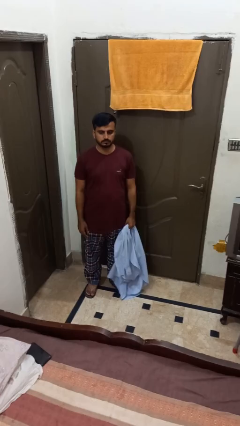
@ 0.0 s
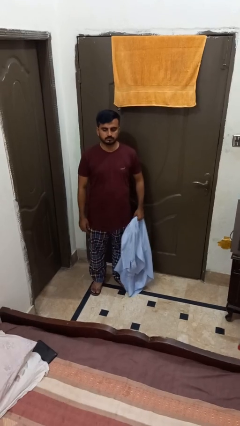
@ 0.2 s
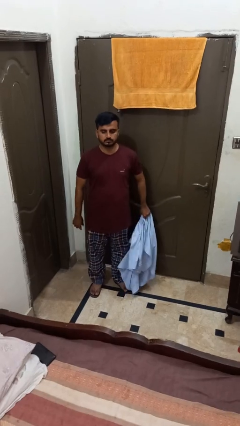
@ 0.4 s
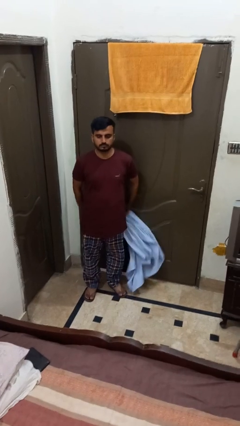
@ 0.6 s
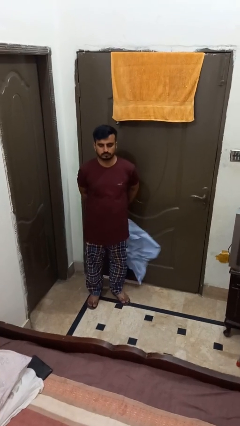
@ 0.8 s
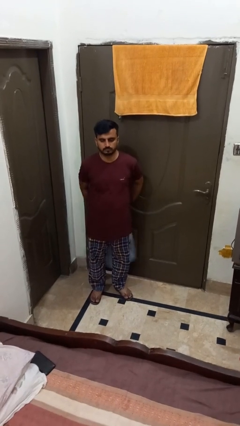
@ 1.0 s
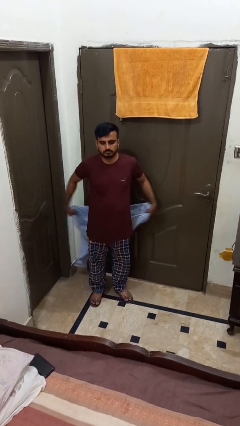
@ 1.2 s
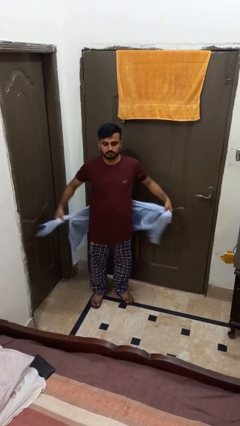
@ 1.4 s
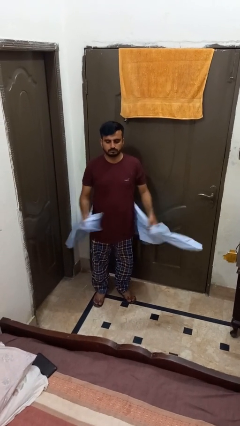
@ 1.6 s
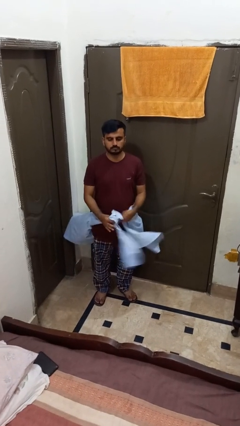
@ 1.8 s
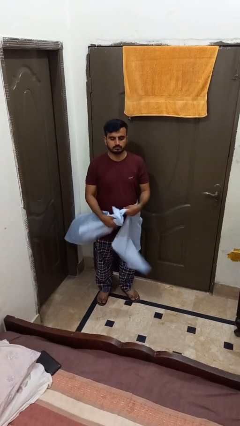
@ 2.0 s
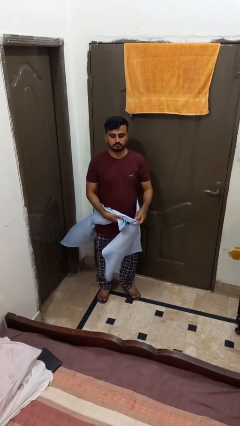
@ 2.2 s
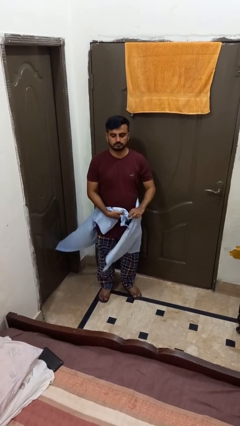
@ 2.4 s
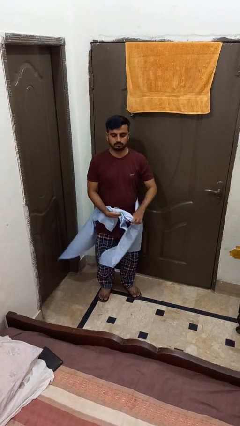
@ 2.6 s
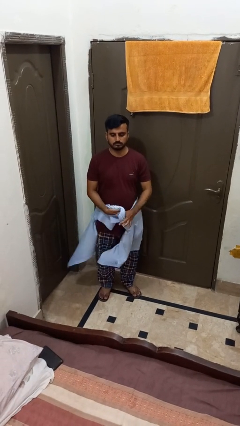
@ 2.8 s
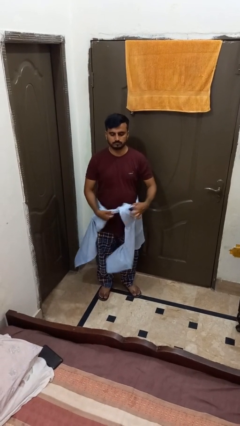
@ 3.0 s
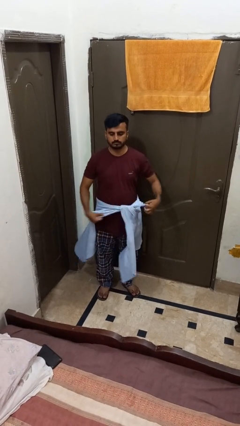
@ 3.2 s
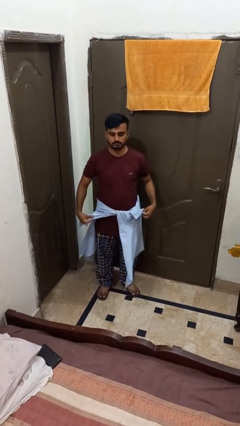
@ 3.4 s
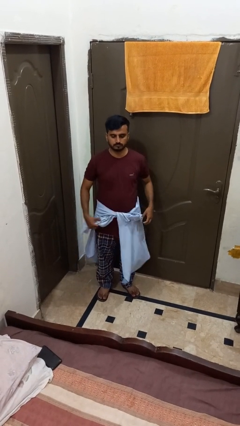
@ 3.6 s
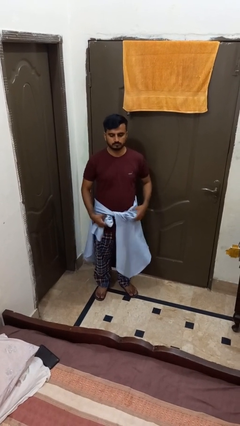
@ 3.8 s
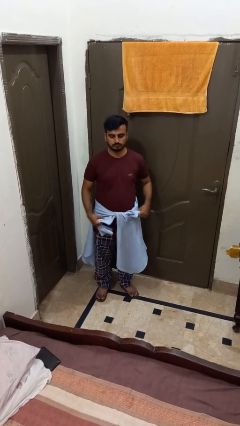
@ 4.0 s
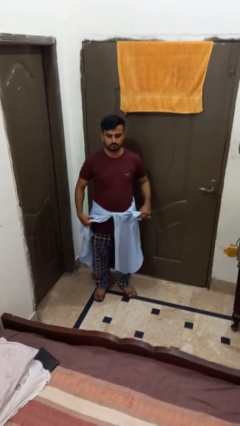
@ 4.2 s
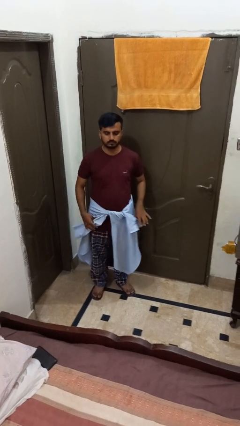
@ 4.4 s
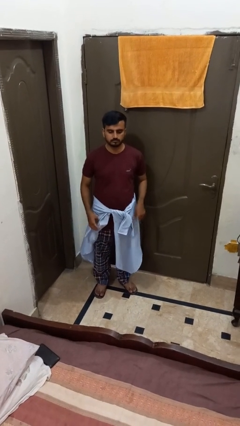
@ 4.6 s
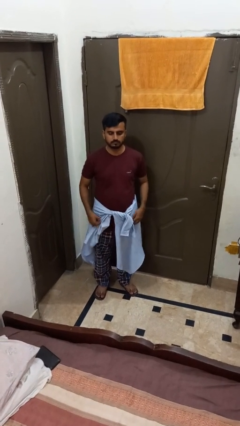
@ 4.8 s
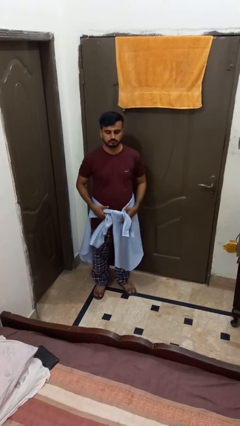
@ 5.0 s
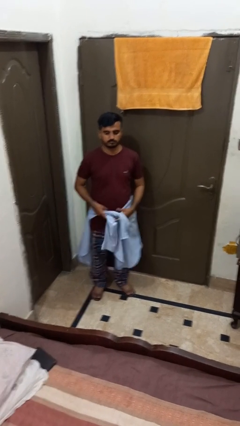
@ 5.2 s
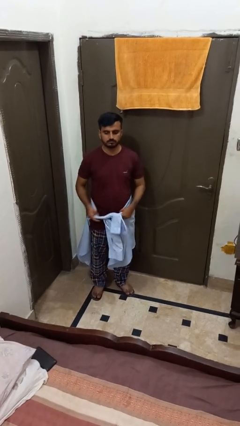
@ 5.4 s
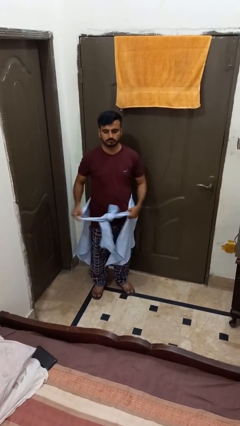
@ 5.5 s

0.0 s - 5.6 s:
person ties jacket around waist

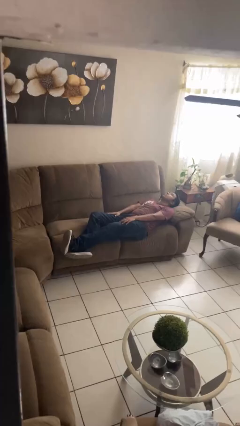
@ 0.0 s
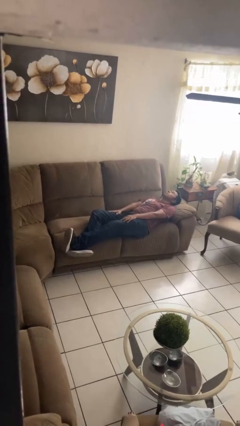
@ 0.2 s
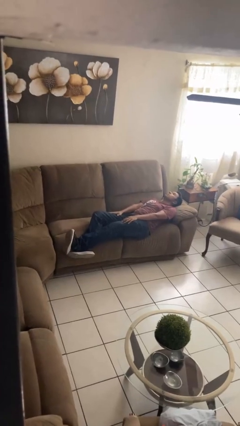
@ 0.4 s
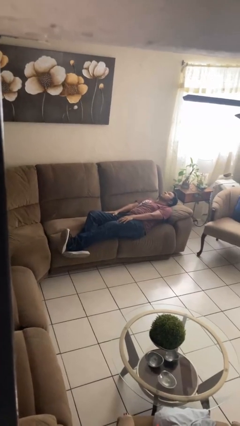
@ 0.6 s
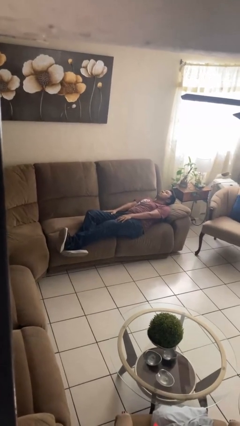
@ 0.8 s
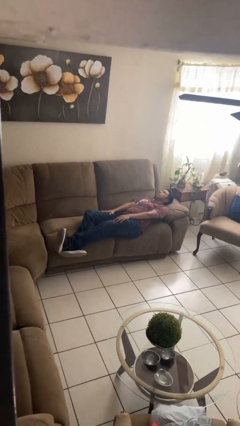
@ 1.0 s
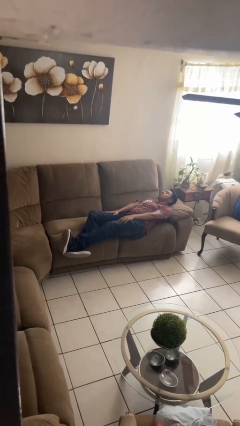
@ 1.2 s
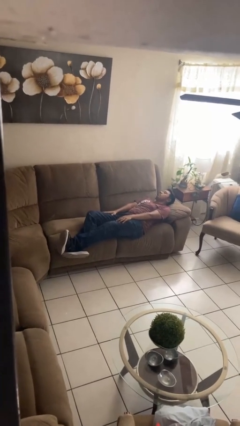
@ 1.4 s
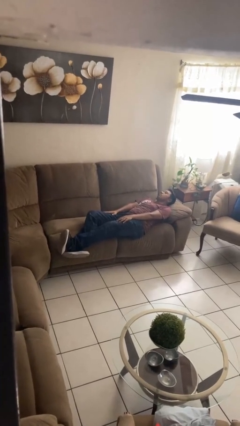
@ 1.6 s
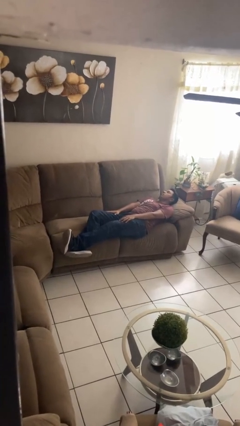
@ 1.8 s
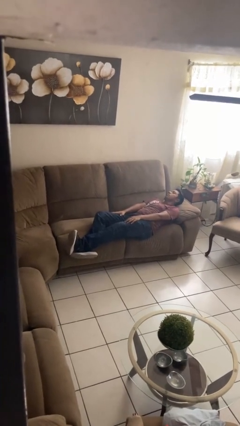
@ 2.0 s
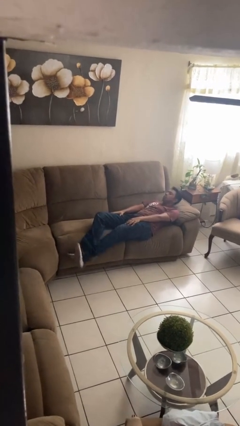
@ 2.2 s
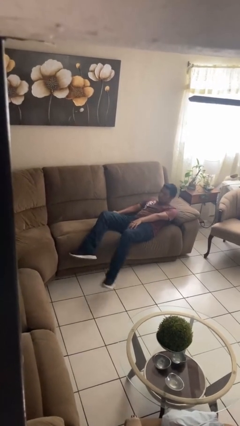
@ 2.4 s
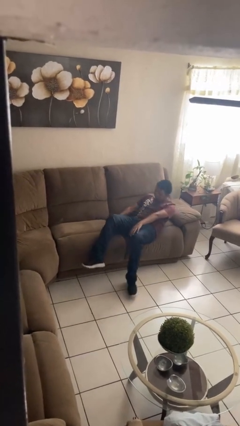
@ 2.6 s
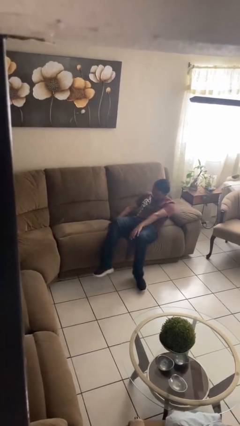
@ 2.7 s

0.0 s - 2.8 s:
person lies down on couch

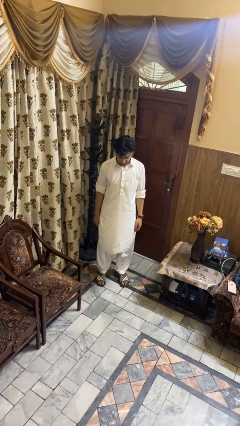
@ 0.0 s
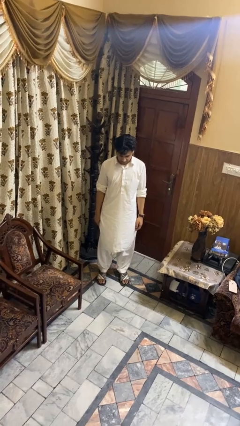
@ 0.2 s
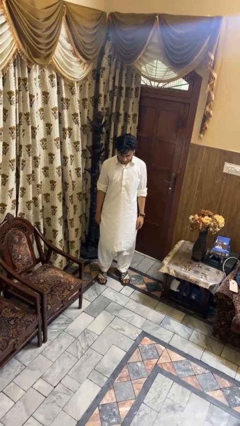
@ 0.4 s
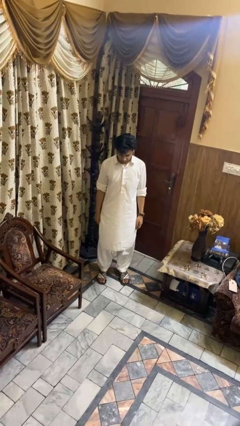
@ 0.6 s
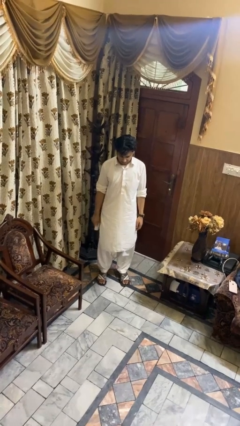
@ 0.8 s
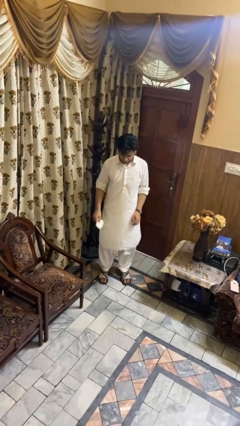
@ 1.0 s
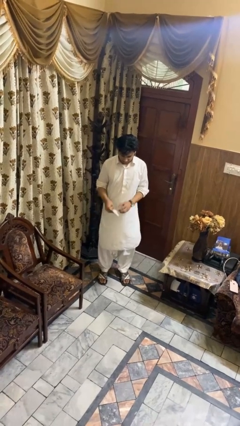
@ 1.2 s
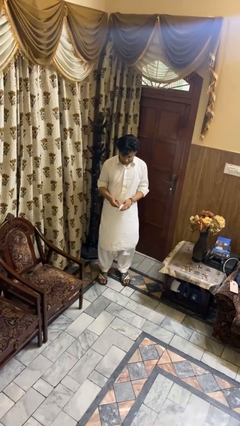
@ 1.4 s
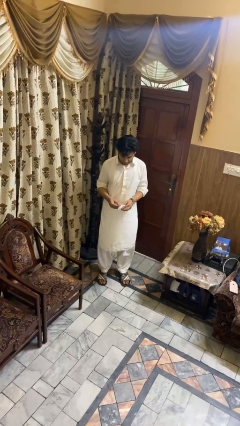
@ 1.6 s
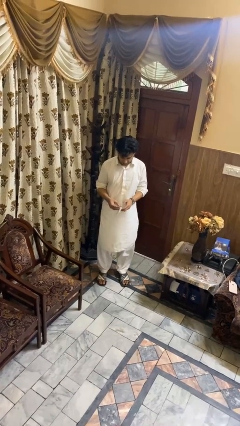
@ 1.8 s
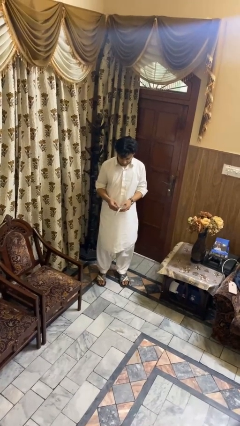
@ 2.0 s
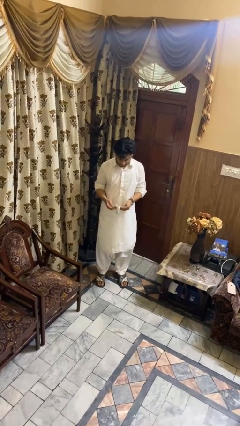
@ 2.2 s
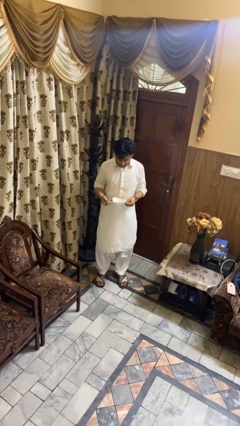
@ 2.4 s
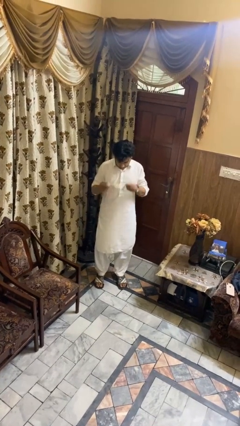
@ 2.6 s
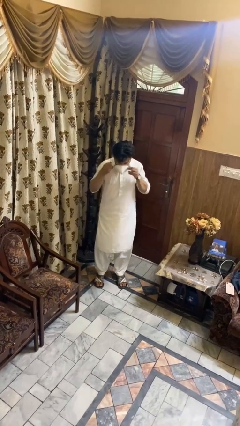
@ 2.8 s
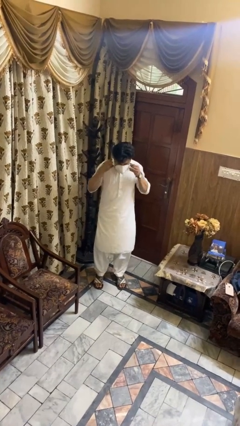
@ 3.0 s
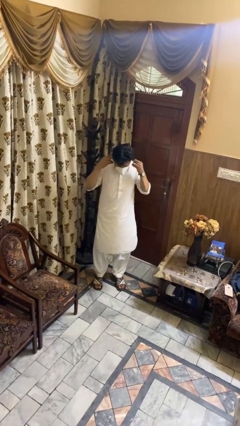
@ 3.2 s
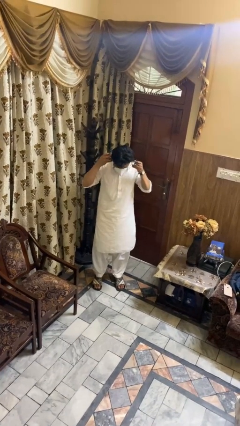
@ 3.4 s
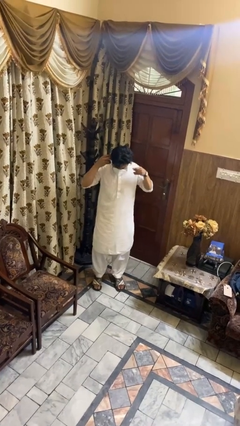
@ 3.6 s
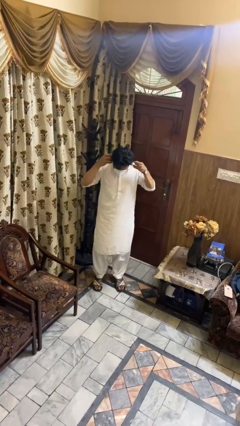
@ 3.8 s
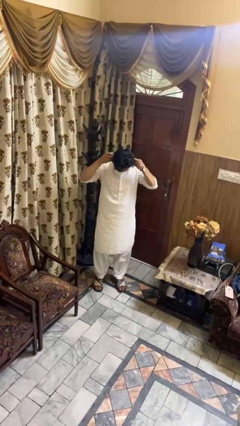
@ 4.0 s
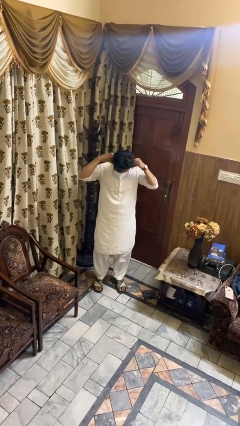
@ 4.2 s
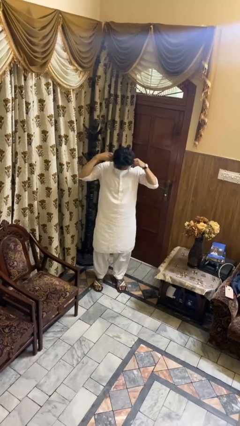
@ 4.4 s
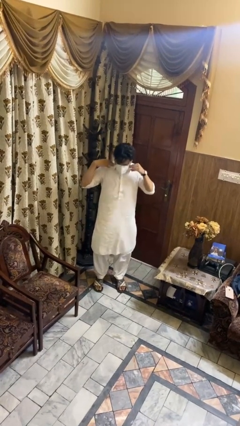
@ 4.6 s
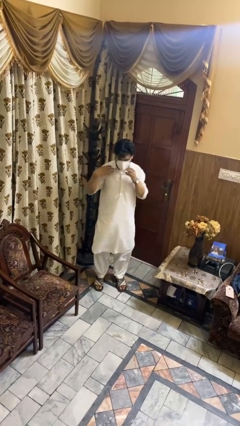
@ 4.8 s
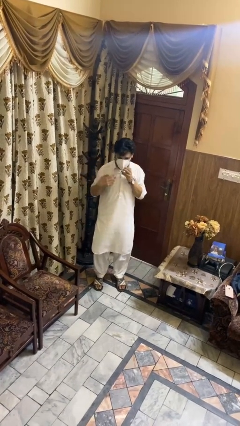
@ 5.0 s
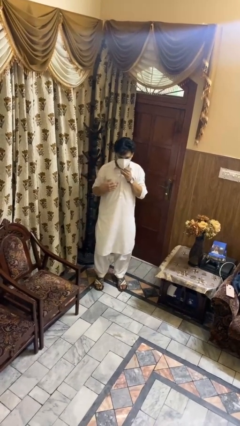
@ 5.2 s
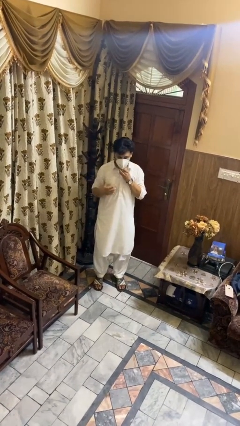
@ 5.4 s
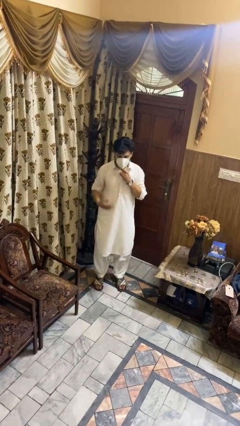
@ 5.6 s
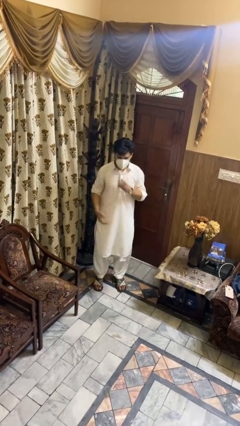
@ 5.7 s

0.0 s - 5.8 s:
person puts on facemask

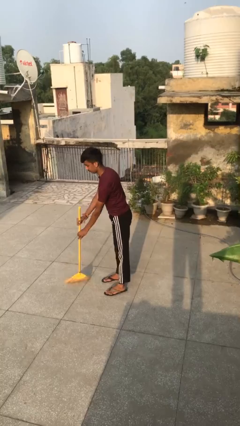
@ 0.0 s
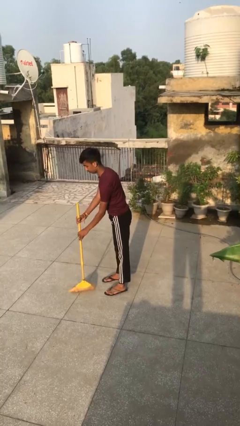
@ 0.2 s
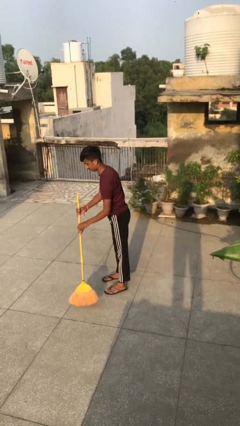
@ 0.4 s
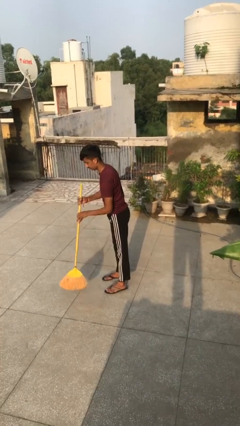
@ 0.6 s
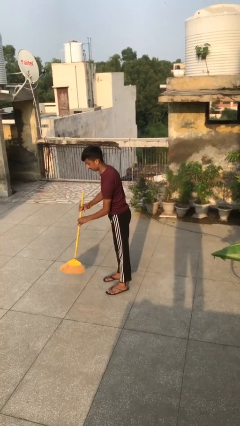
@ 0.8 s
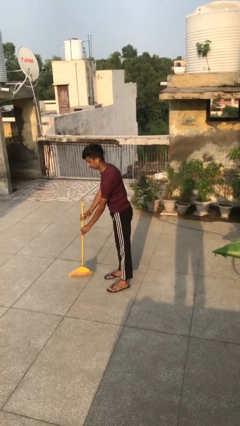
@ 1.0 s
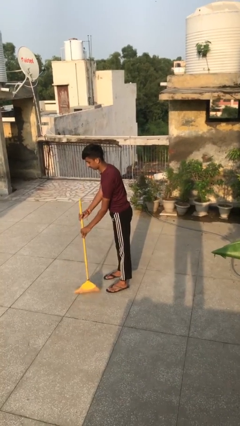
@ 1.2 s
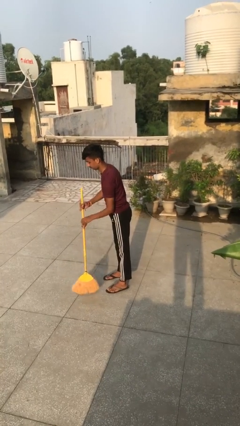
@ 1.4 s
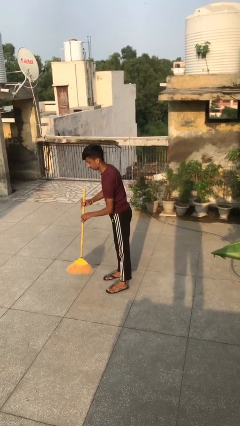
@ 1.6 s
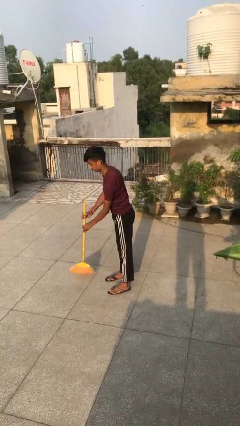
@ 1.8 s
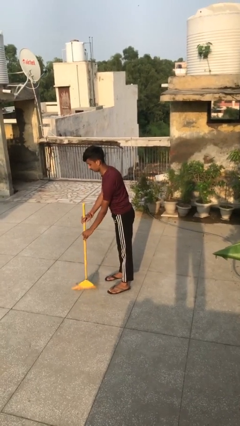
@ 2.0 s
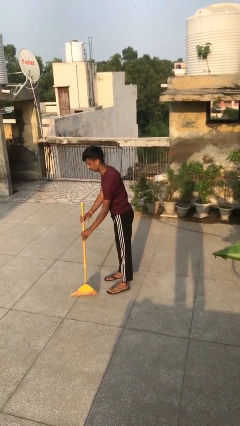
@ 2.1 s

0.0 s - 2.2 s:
person sweeps floor

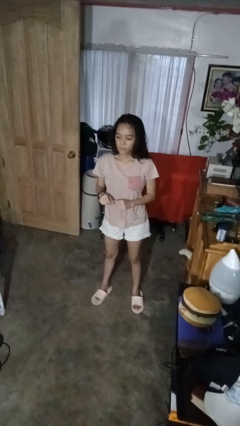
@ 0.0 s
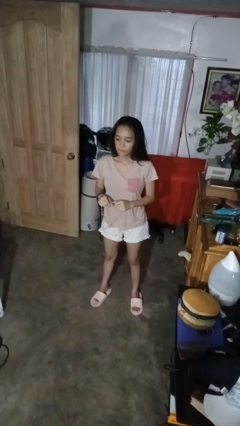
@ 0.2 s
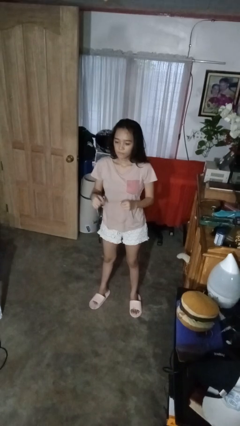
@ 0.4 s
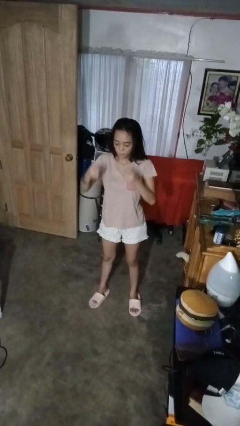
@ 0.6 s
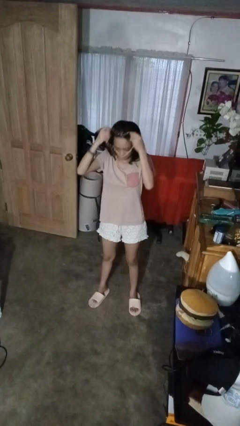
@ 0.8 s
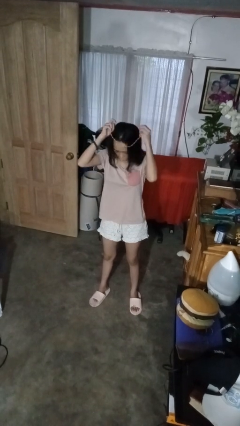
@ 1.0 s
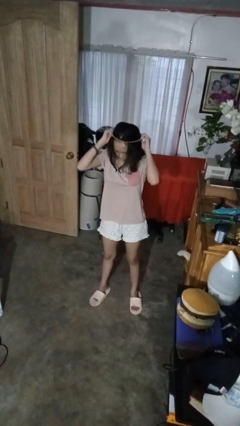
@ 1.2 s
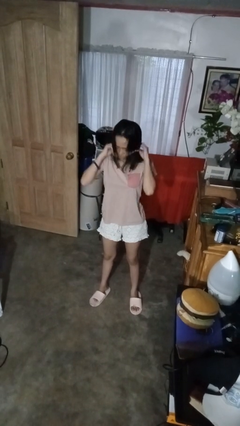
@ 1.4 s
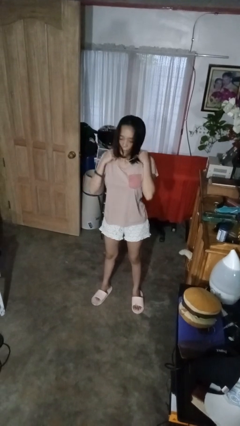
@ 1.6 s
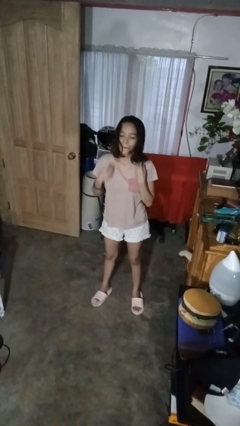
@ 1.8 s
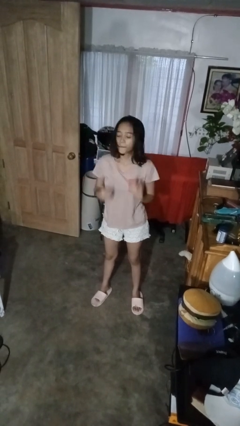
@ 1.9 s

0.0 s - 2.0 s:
person puts on necklace
